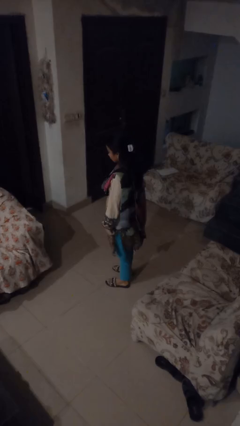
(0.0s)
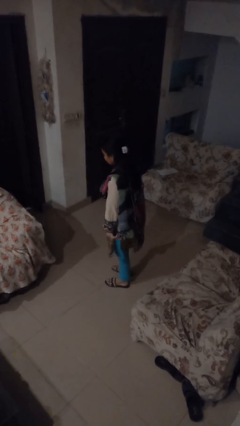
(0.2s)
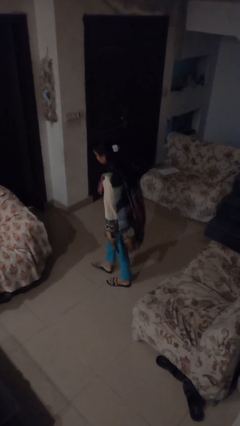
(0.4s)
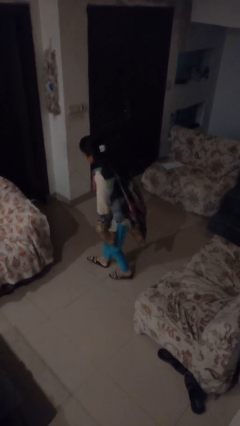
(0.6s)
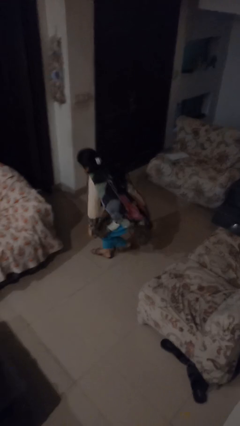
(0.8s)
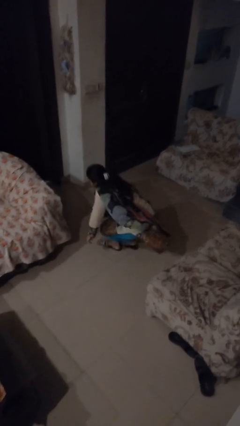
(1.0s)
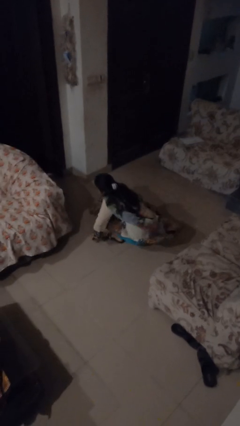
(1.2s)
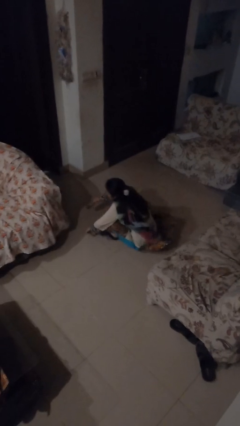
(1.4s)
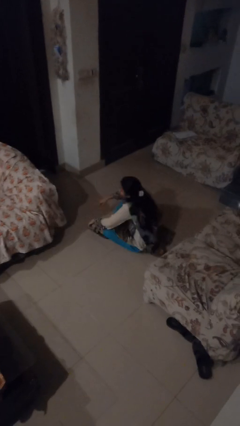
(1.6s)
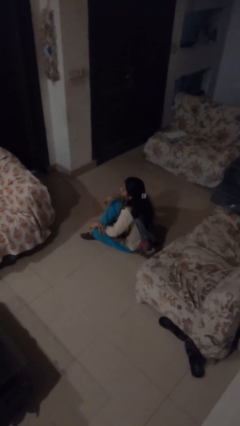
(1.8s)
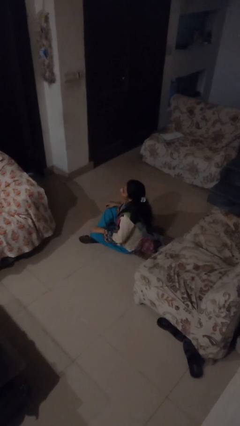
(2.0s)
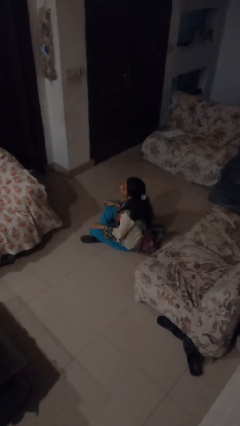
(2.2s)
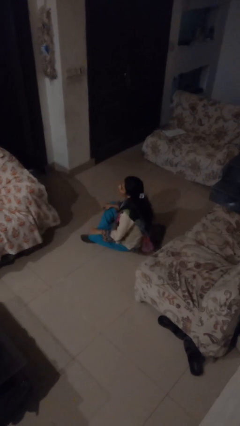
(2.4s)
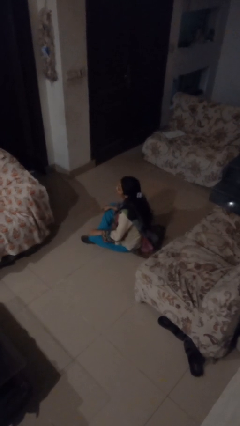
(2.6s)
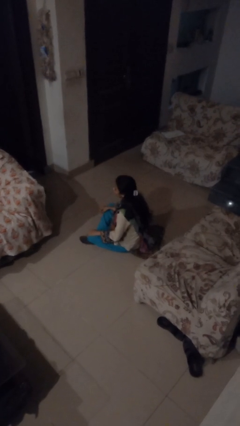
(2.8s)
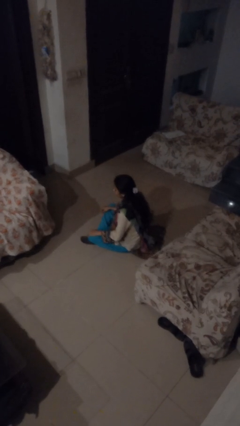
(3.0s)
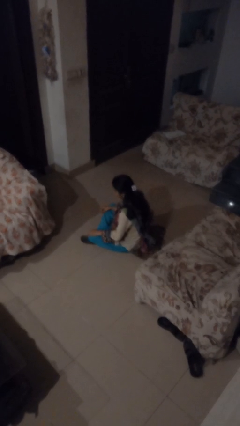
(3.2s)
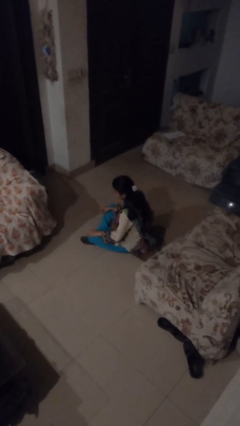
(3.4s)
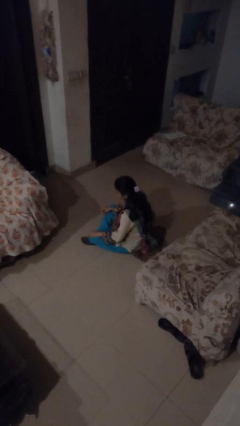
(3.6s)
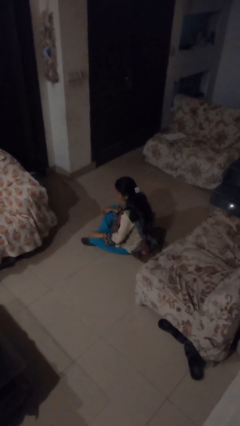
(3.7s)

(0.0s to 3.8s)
person sits crisscross

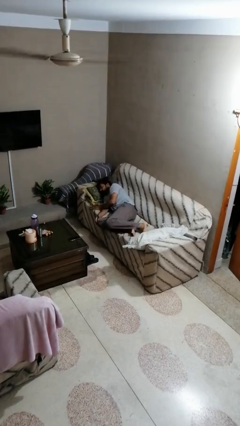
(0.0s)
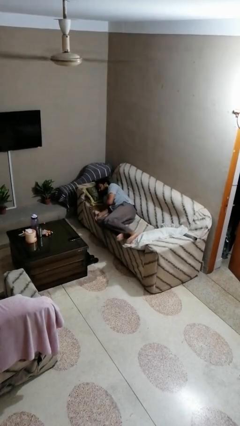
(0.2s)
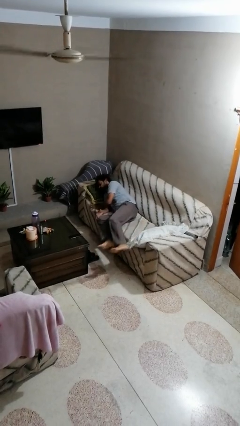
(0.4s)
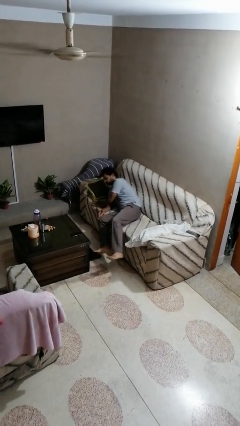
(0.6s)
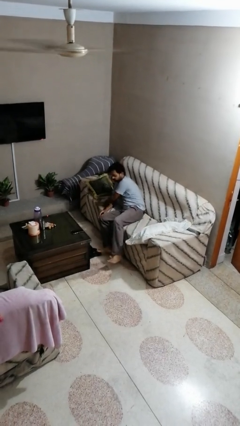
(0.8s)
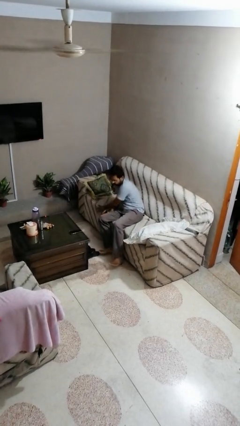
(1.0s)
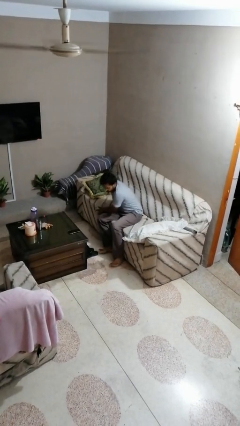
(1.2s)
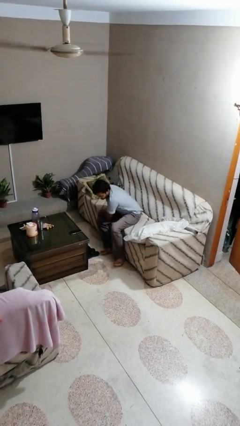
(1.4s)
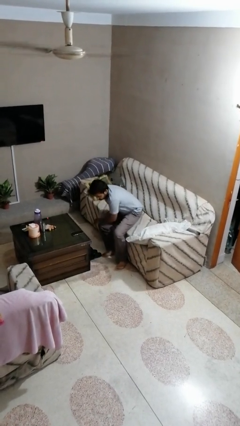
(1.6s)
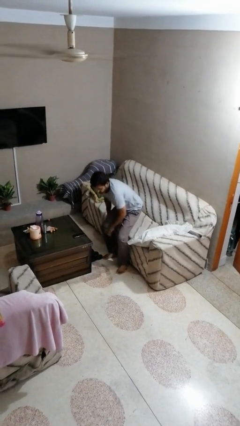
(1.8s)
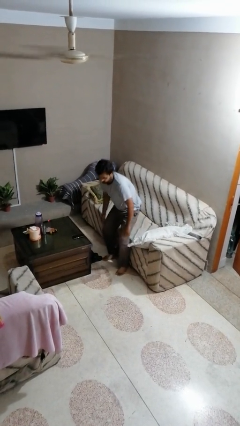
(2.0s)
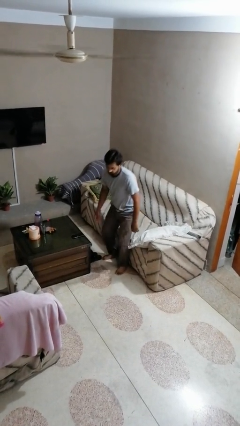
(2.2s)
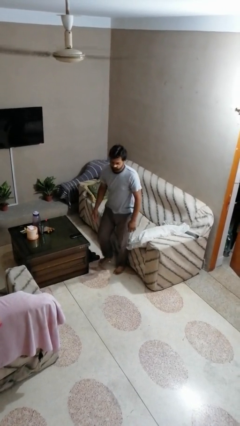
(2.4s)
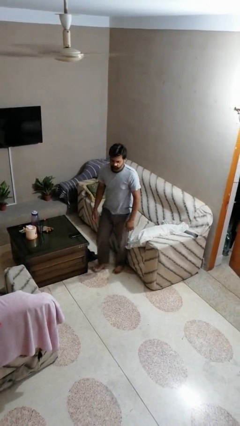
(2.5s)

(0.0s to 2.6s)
person stands up

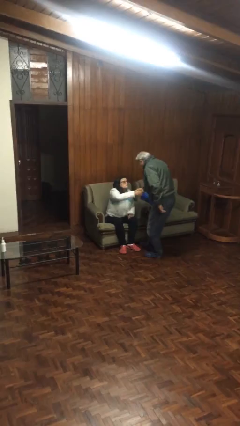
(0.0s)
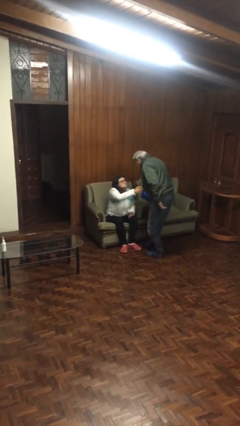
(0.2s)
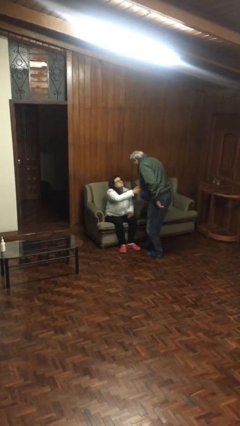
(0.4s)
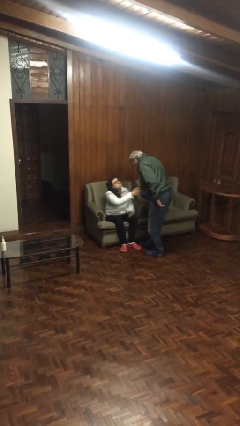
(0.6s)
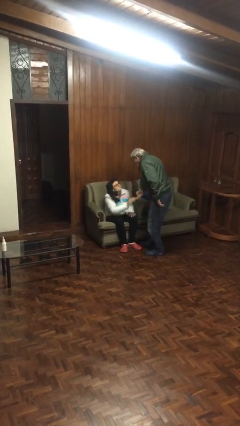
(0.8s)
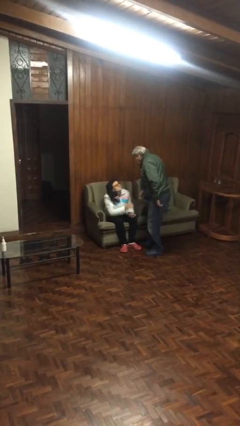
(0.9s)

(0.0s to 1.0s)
person shakes hand

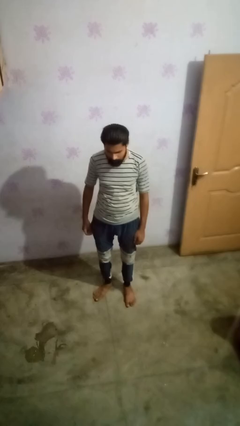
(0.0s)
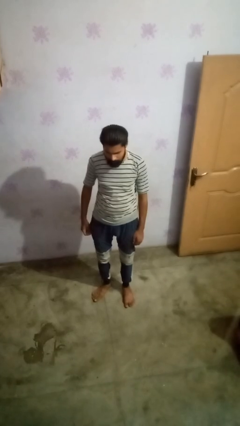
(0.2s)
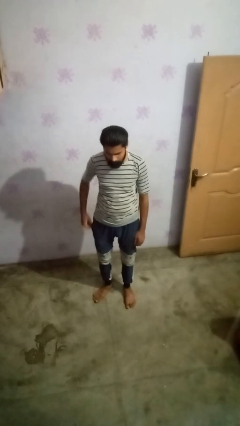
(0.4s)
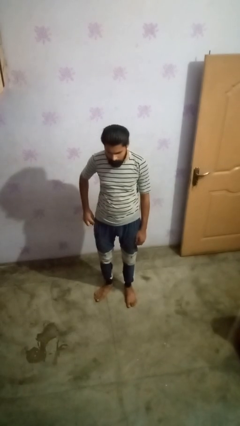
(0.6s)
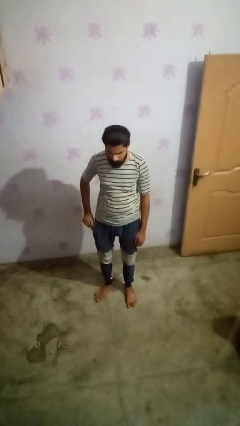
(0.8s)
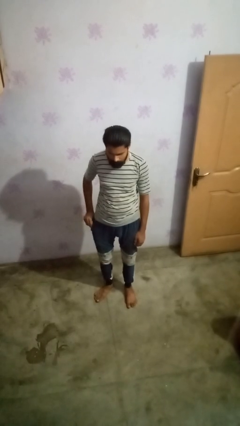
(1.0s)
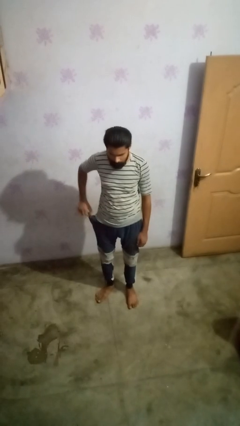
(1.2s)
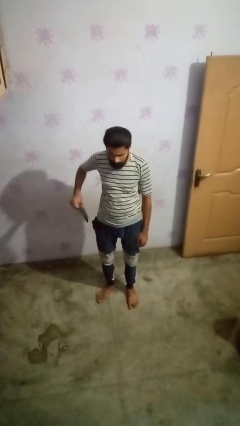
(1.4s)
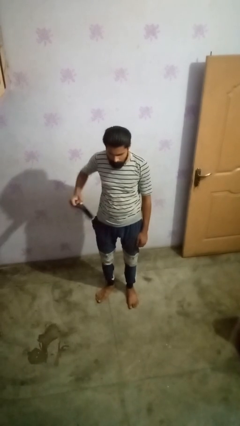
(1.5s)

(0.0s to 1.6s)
person takes phone from pocket

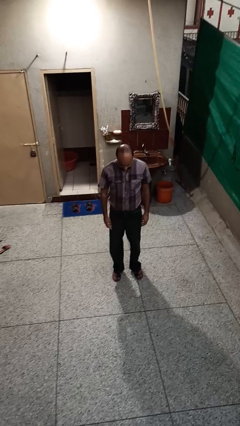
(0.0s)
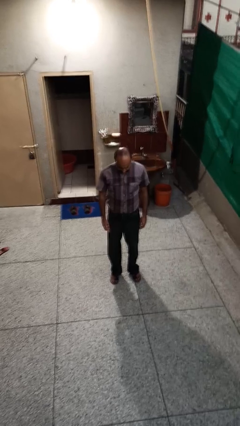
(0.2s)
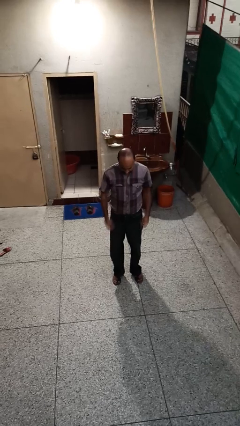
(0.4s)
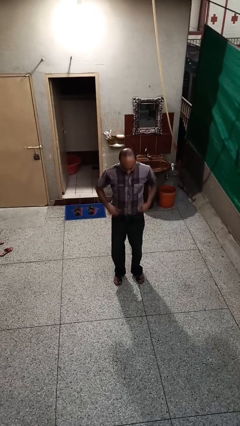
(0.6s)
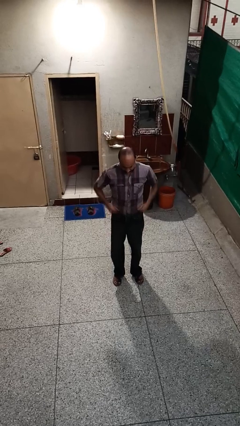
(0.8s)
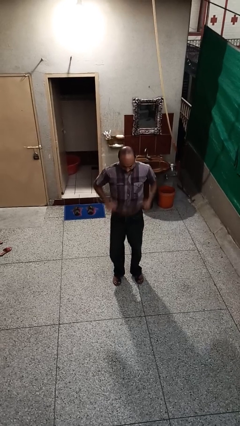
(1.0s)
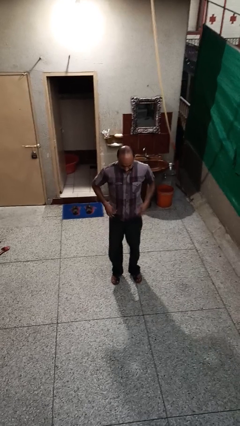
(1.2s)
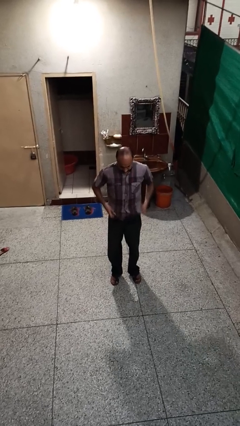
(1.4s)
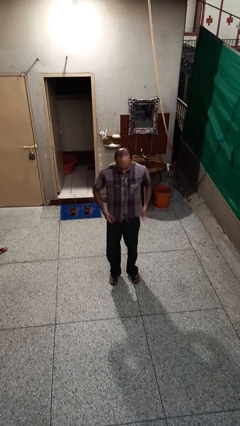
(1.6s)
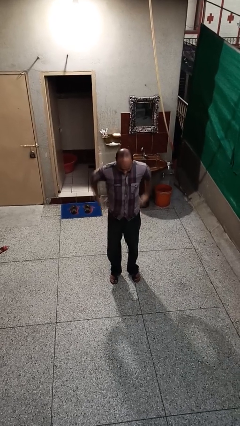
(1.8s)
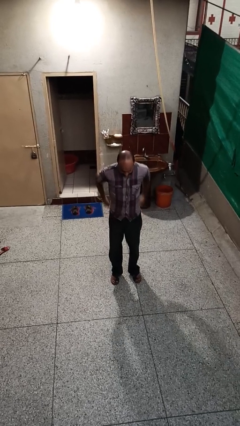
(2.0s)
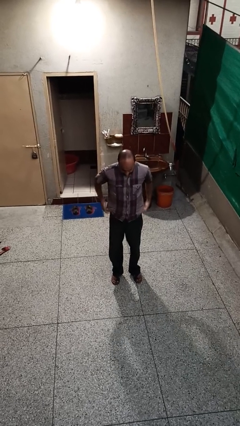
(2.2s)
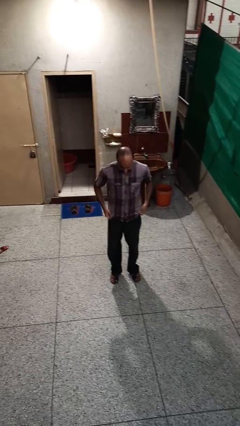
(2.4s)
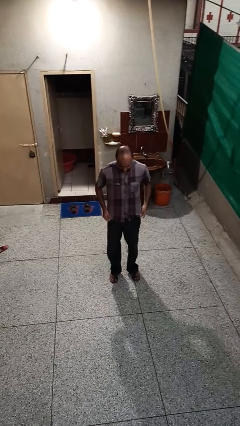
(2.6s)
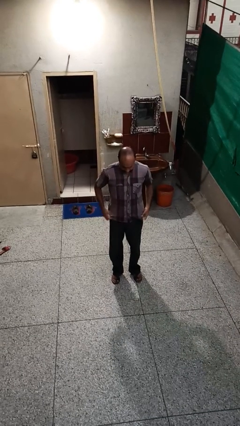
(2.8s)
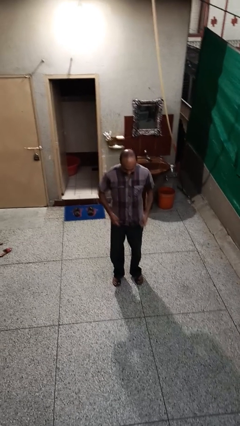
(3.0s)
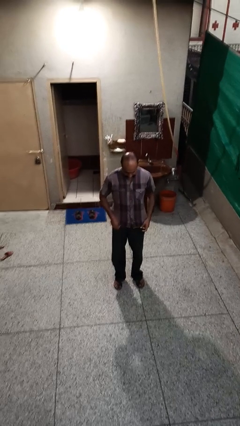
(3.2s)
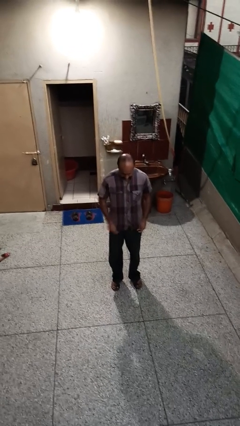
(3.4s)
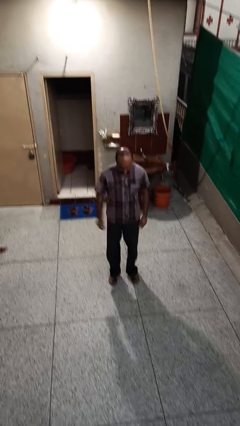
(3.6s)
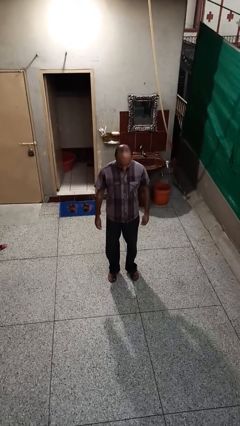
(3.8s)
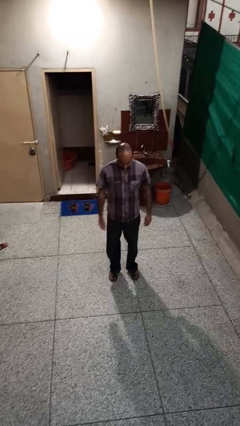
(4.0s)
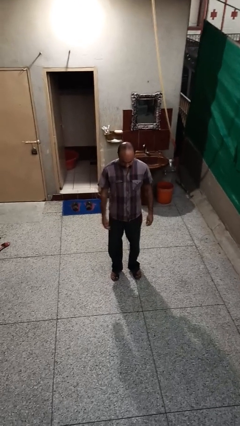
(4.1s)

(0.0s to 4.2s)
person untucks shirt

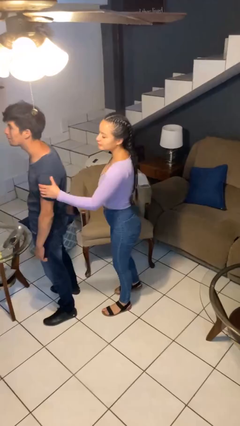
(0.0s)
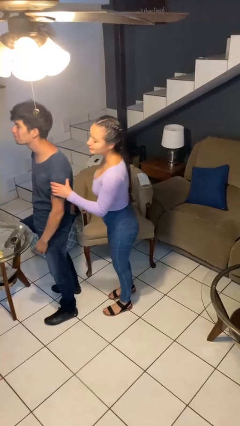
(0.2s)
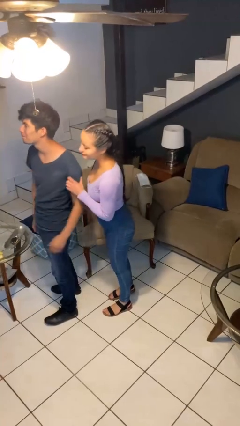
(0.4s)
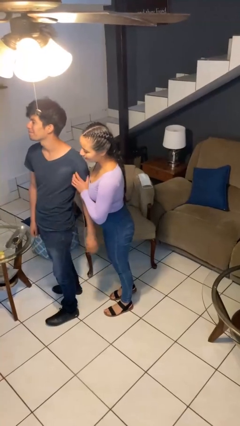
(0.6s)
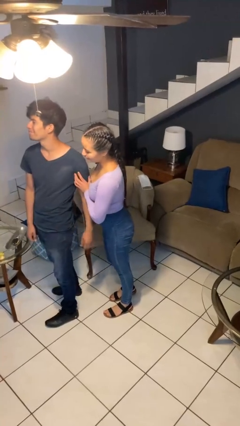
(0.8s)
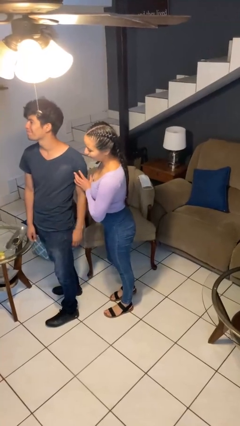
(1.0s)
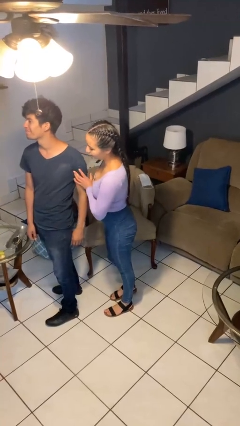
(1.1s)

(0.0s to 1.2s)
person grabs person by bicep

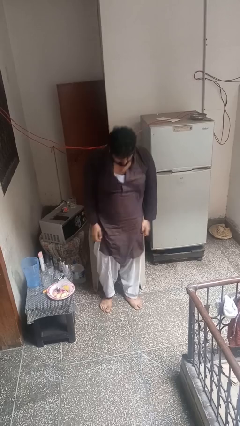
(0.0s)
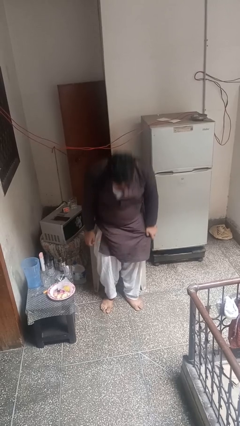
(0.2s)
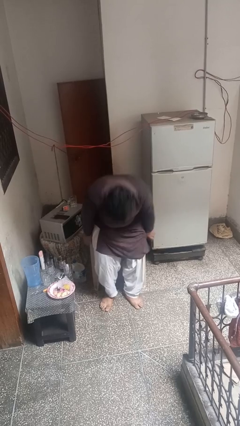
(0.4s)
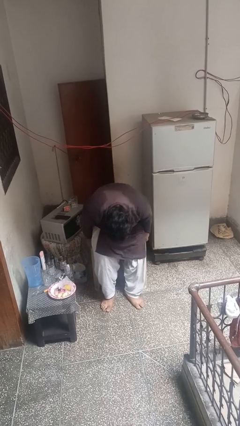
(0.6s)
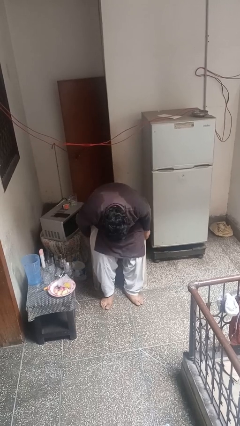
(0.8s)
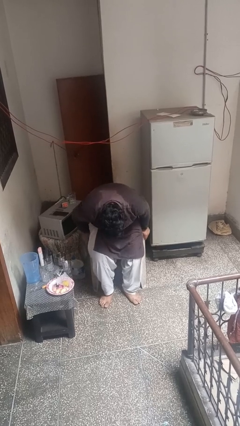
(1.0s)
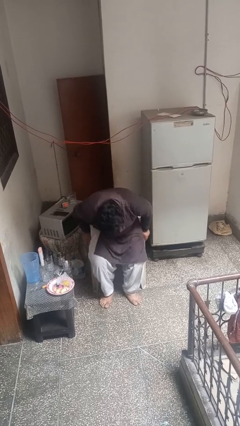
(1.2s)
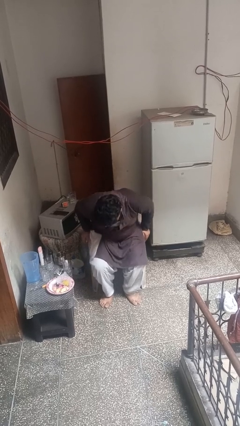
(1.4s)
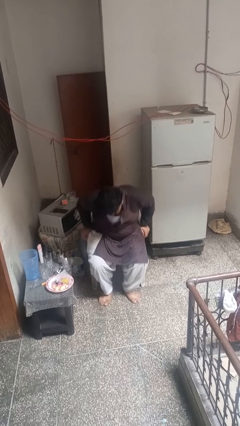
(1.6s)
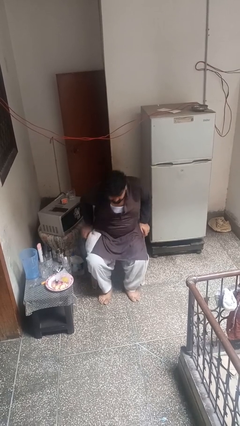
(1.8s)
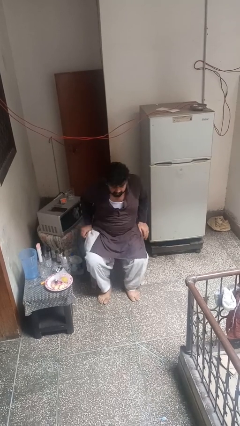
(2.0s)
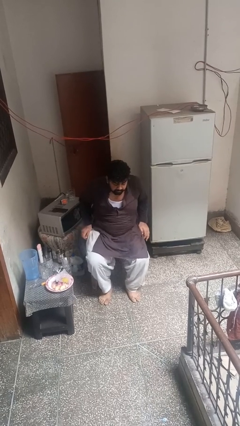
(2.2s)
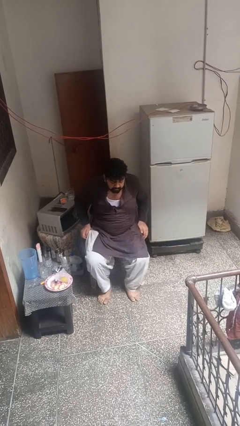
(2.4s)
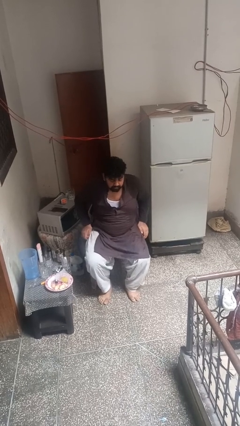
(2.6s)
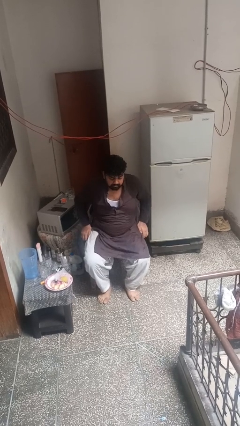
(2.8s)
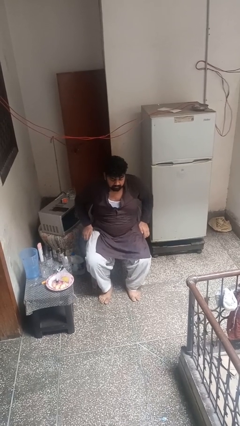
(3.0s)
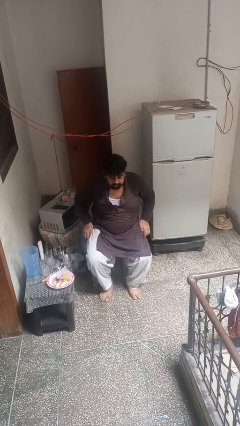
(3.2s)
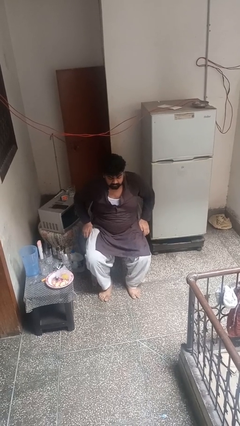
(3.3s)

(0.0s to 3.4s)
person sits down
